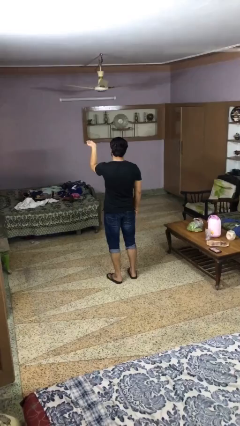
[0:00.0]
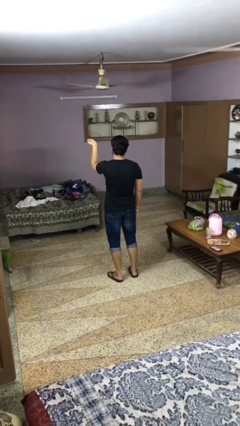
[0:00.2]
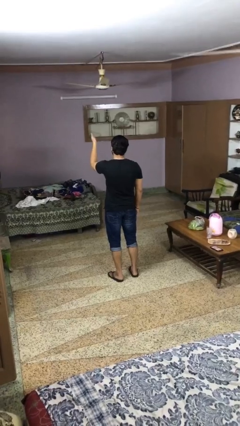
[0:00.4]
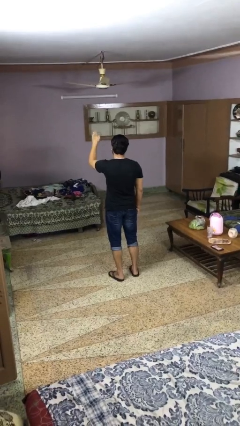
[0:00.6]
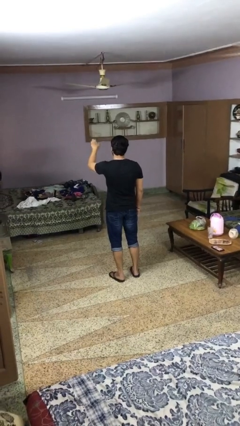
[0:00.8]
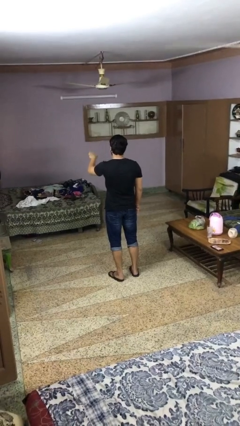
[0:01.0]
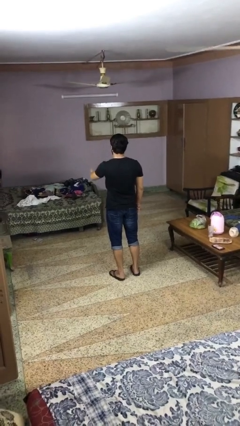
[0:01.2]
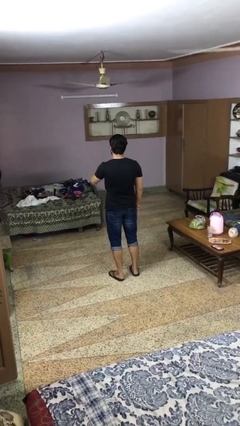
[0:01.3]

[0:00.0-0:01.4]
person gestures swipe down

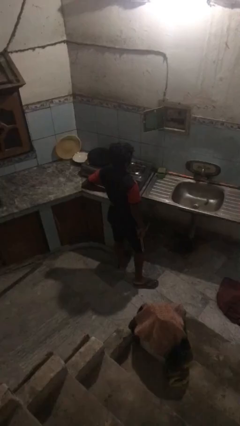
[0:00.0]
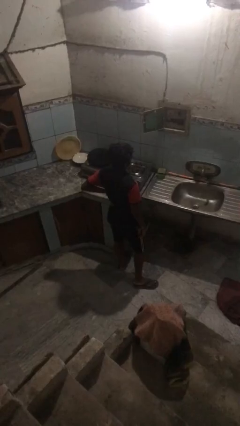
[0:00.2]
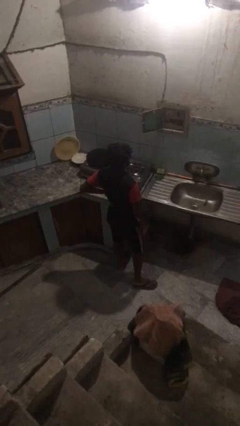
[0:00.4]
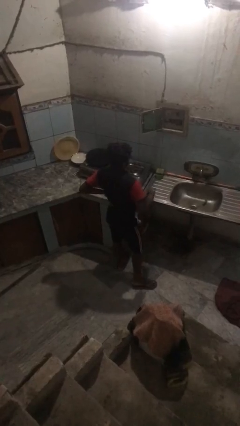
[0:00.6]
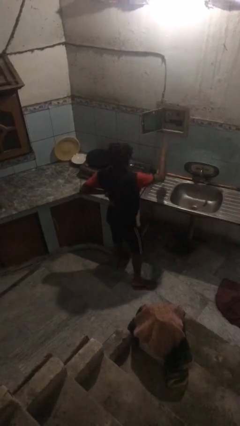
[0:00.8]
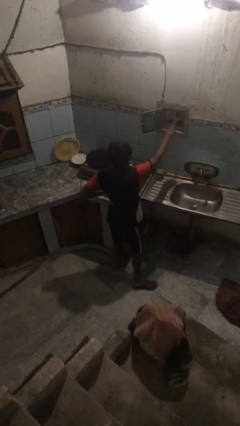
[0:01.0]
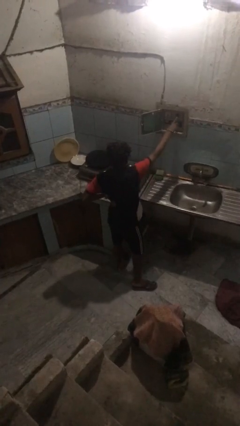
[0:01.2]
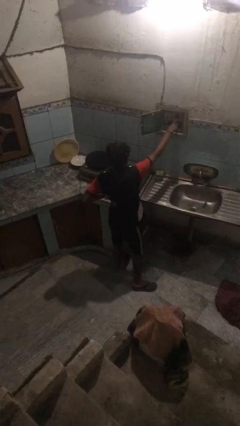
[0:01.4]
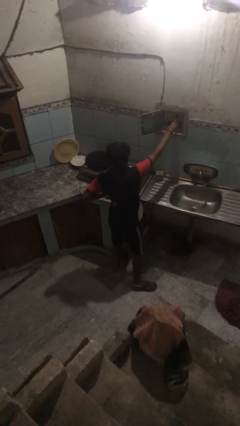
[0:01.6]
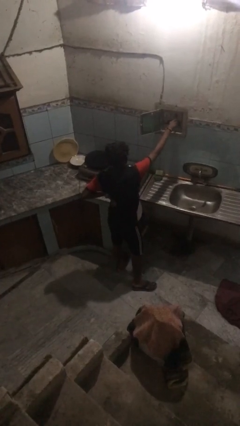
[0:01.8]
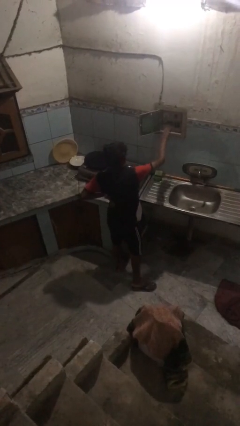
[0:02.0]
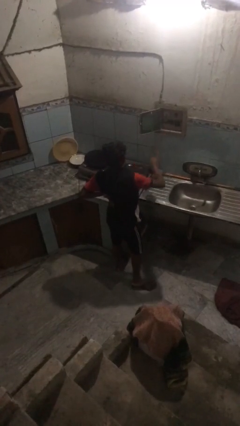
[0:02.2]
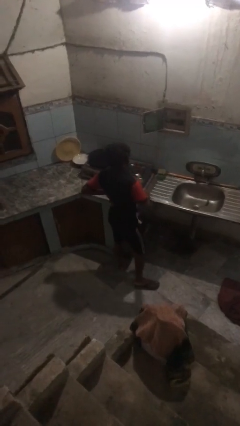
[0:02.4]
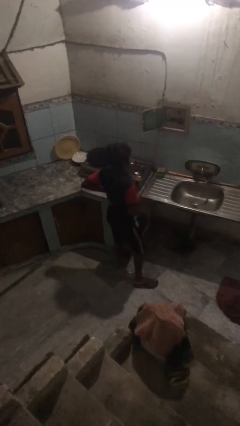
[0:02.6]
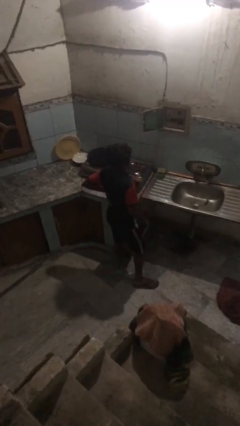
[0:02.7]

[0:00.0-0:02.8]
person takes down smoke detector

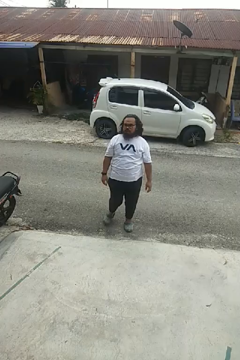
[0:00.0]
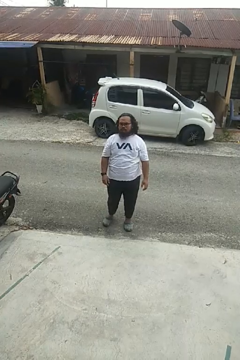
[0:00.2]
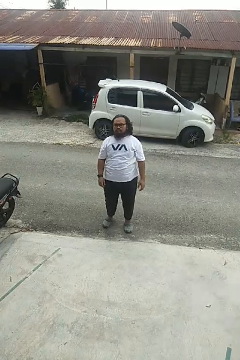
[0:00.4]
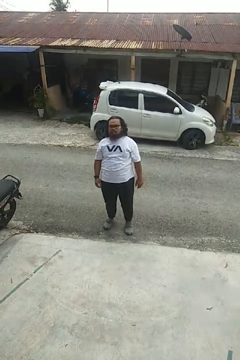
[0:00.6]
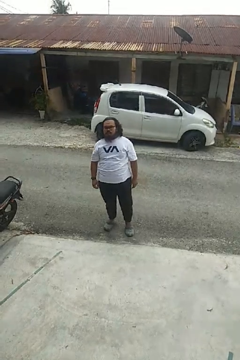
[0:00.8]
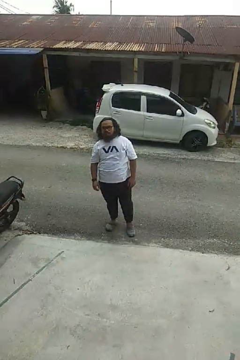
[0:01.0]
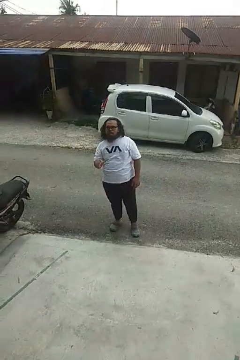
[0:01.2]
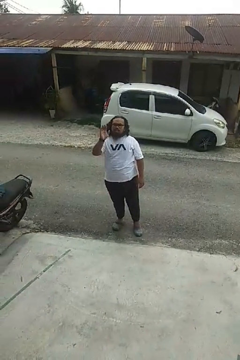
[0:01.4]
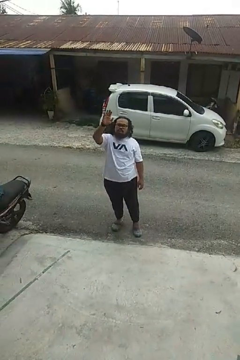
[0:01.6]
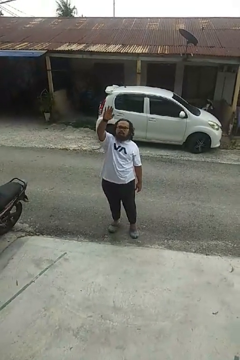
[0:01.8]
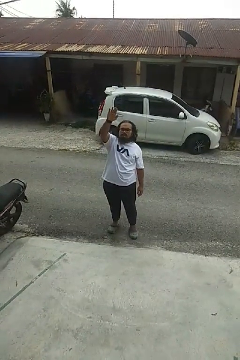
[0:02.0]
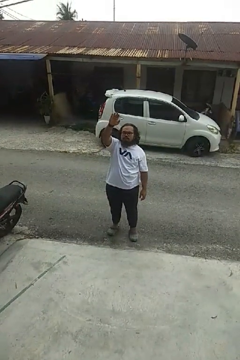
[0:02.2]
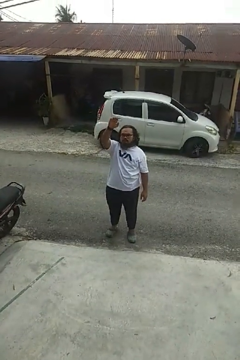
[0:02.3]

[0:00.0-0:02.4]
person gestures raise hand

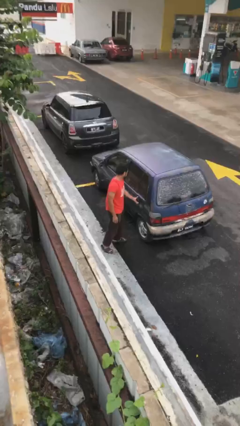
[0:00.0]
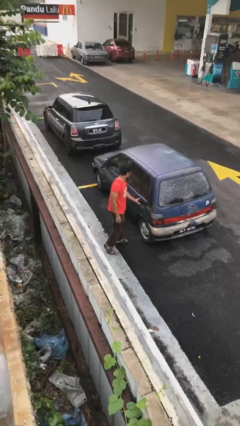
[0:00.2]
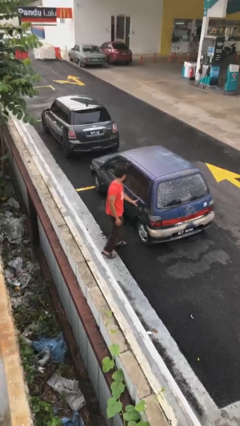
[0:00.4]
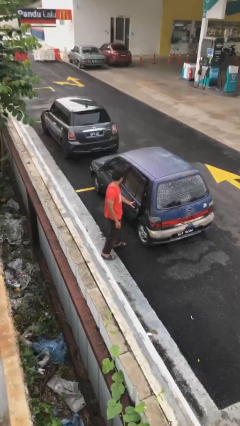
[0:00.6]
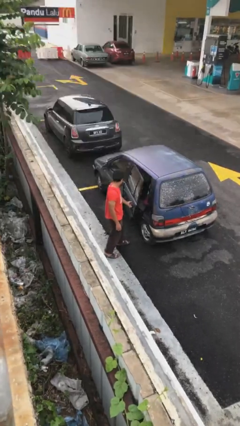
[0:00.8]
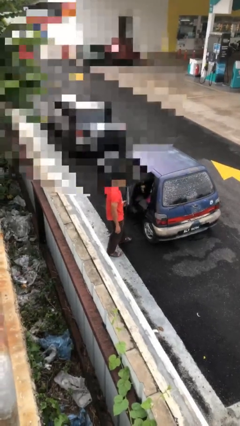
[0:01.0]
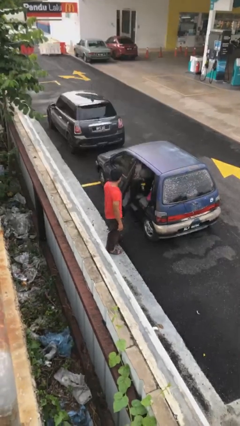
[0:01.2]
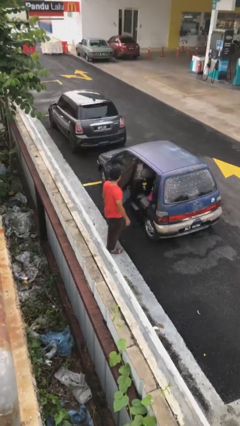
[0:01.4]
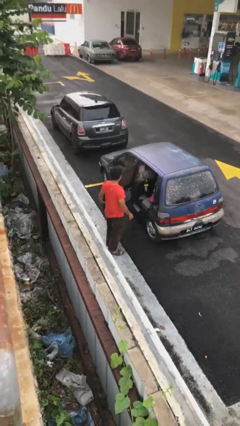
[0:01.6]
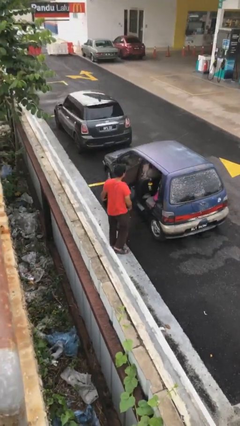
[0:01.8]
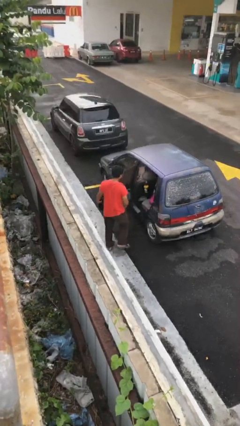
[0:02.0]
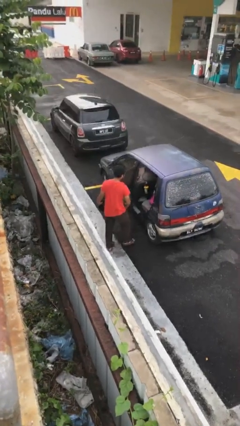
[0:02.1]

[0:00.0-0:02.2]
person opens car door

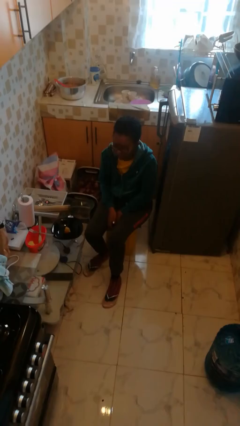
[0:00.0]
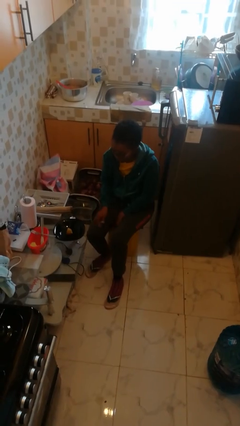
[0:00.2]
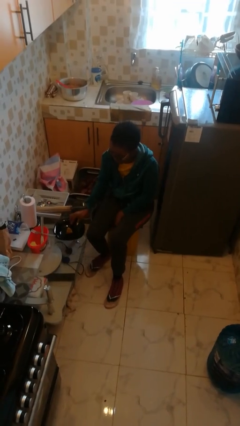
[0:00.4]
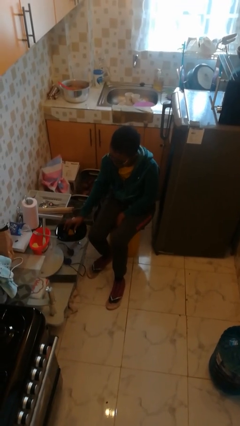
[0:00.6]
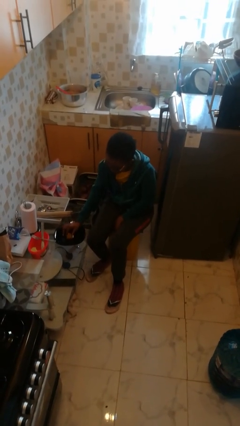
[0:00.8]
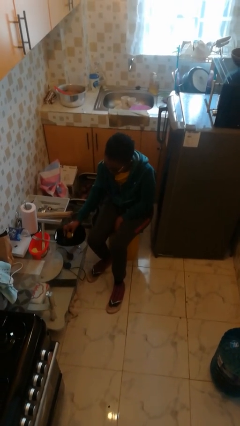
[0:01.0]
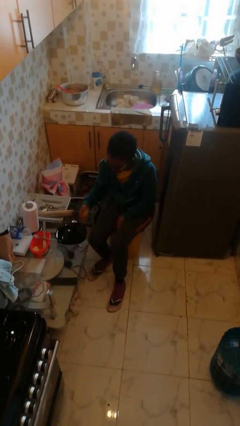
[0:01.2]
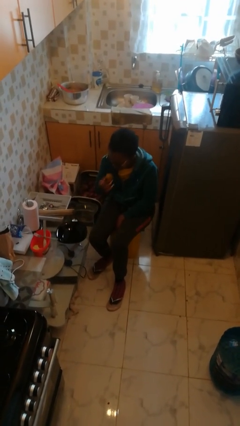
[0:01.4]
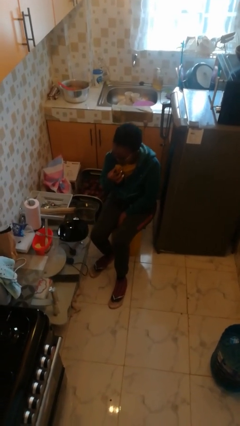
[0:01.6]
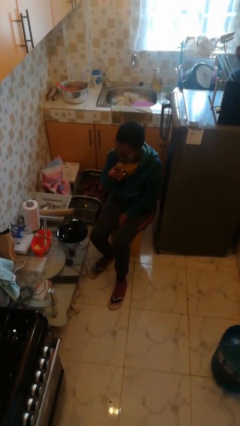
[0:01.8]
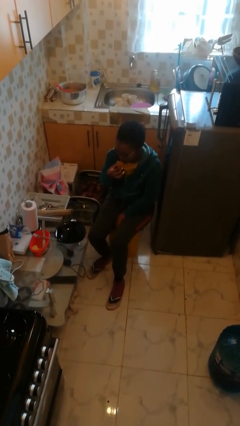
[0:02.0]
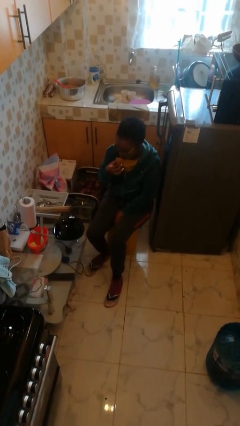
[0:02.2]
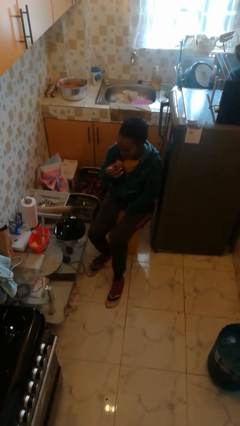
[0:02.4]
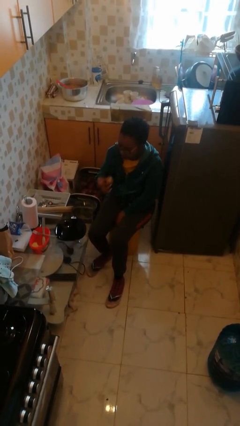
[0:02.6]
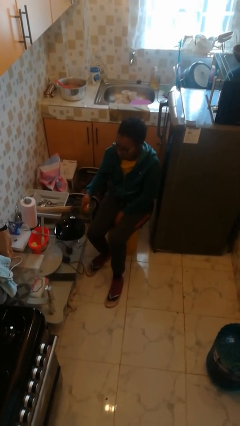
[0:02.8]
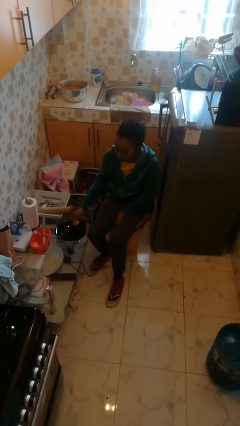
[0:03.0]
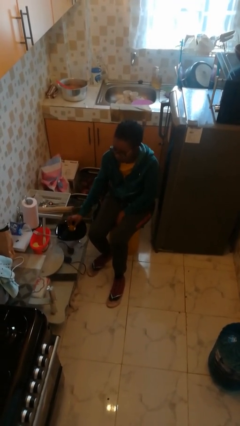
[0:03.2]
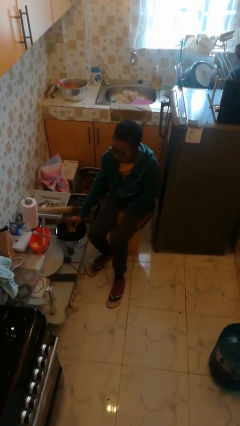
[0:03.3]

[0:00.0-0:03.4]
person eats with hands

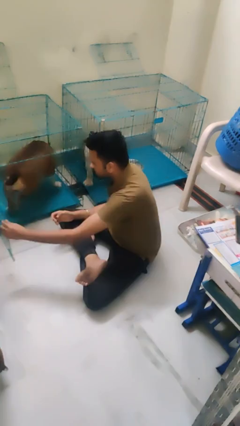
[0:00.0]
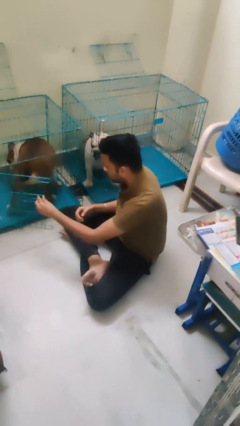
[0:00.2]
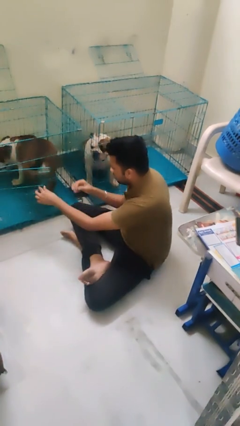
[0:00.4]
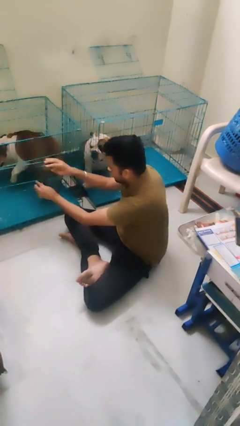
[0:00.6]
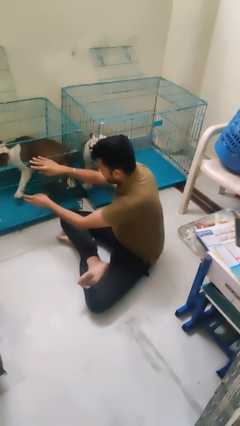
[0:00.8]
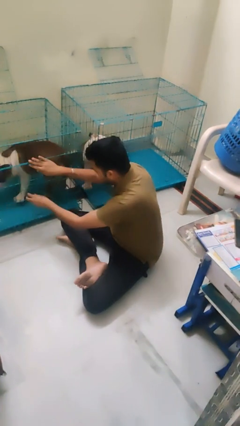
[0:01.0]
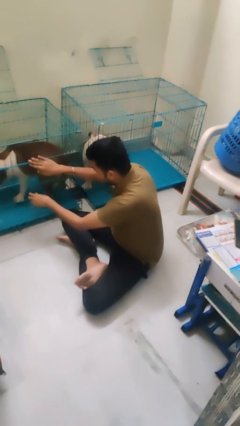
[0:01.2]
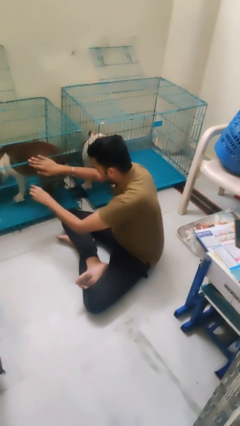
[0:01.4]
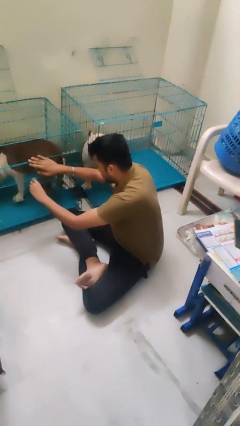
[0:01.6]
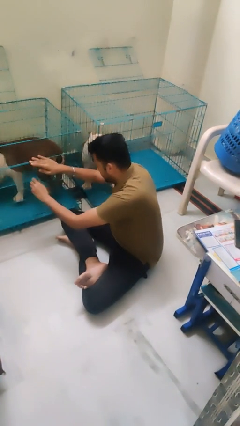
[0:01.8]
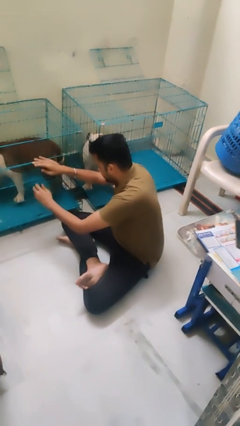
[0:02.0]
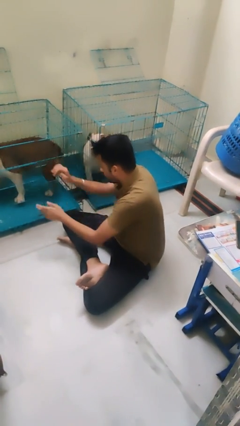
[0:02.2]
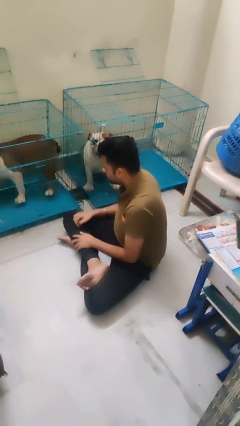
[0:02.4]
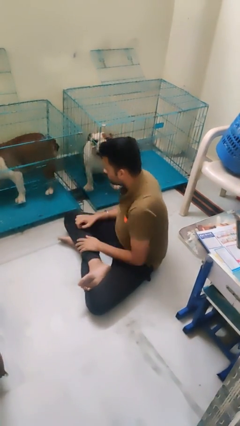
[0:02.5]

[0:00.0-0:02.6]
person crates dog

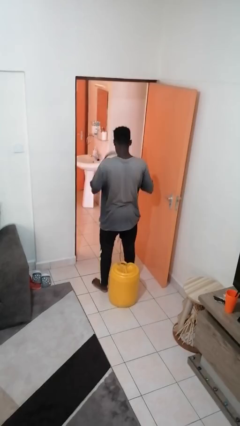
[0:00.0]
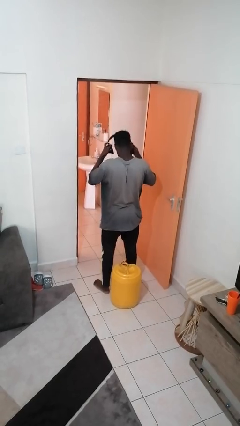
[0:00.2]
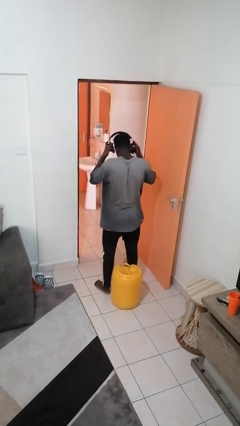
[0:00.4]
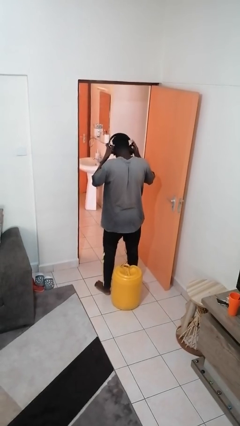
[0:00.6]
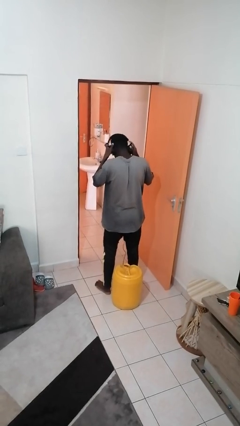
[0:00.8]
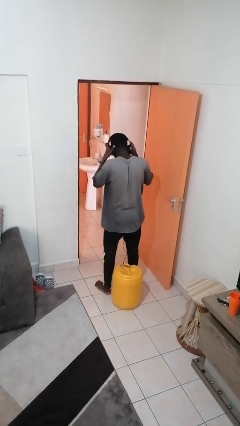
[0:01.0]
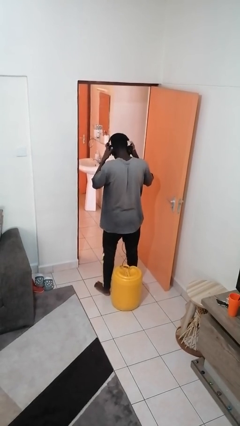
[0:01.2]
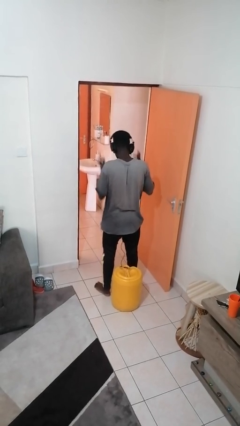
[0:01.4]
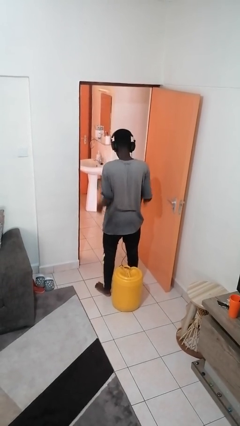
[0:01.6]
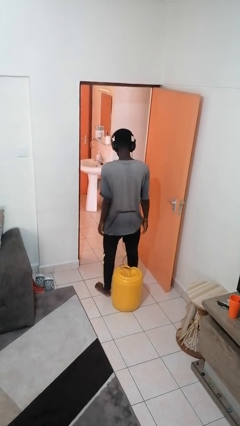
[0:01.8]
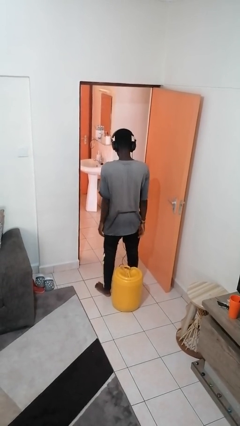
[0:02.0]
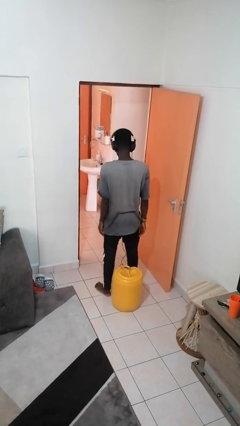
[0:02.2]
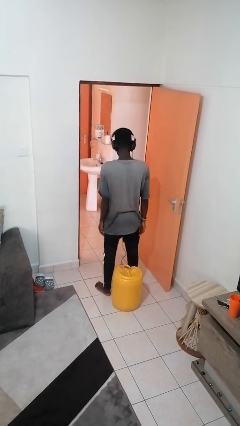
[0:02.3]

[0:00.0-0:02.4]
person puts on headphones

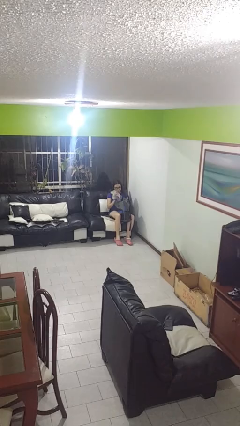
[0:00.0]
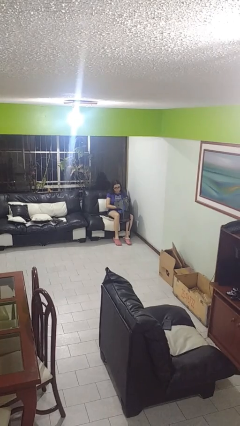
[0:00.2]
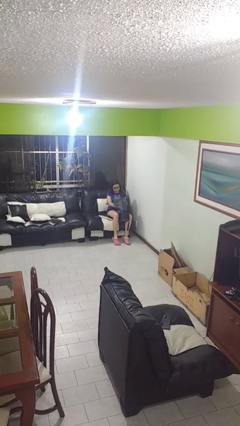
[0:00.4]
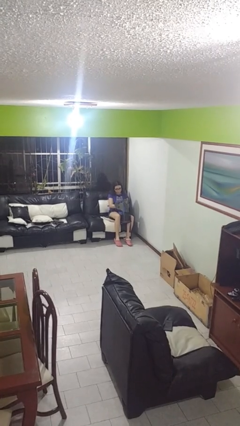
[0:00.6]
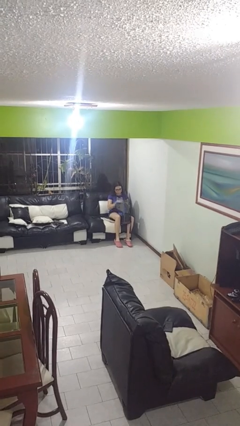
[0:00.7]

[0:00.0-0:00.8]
person puts object into backpack
